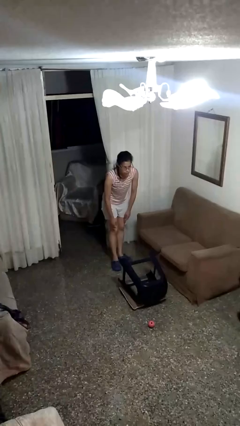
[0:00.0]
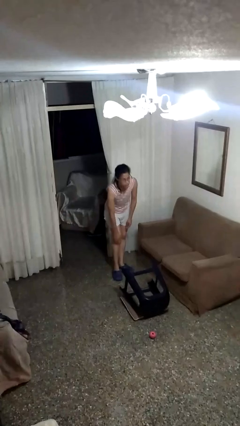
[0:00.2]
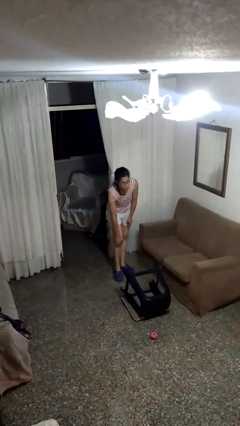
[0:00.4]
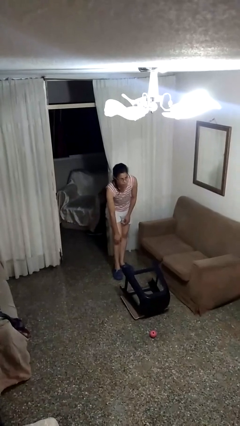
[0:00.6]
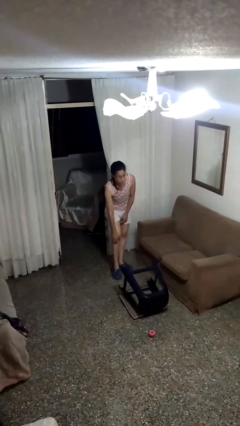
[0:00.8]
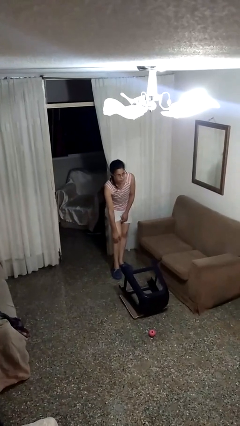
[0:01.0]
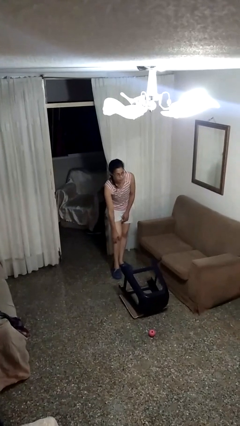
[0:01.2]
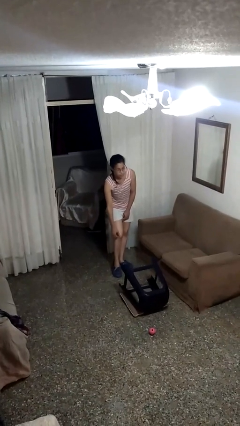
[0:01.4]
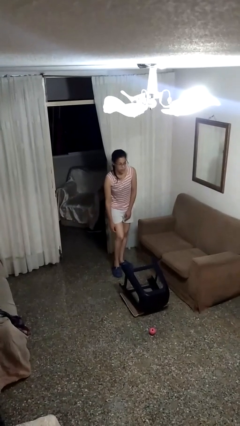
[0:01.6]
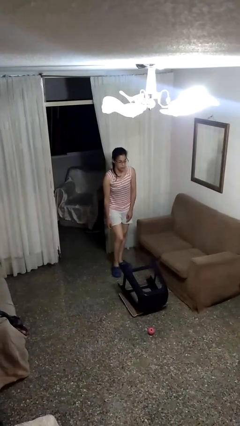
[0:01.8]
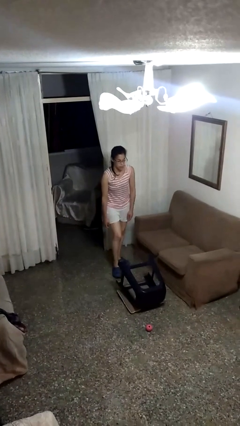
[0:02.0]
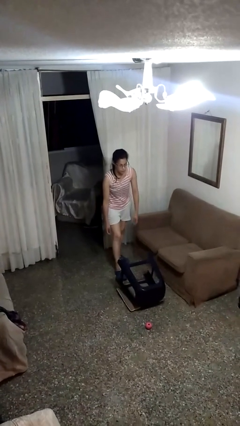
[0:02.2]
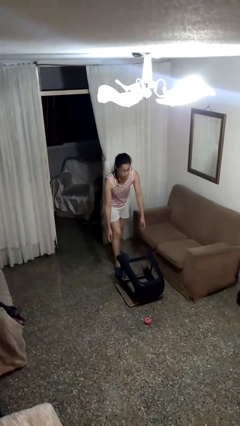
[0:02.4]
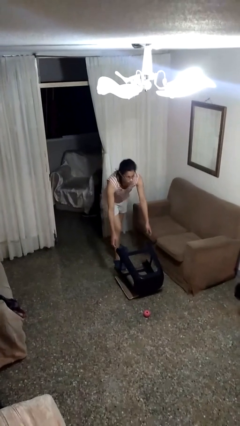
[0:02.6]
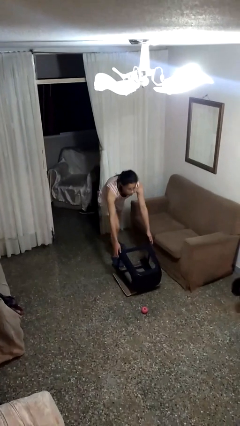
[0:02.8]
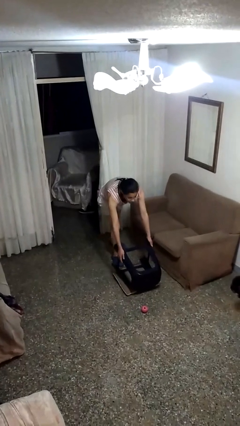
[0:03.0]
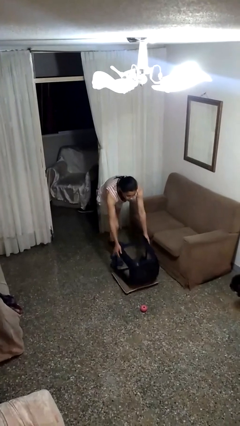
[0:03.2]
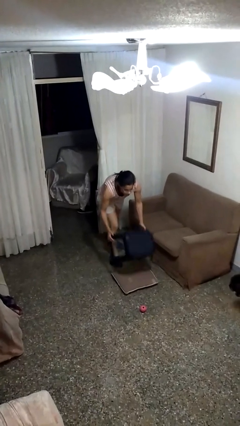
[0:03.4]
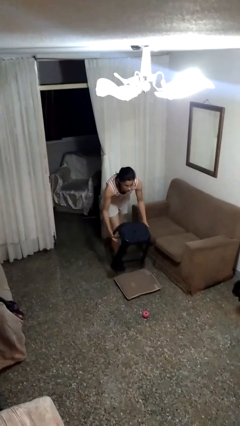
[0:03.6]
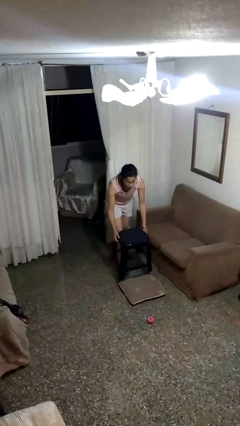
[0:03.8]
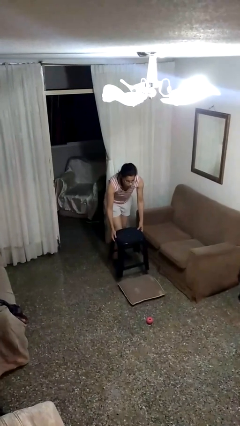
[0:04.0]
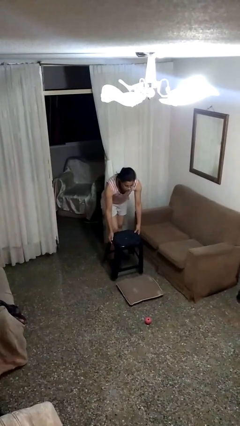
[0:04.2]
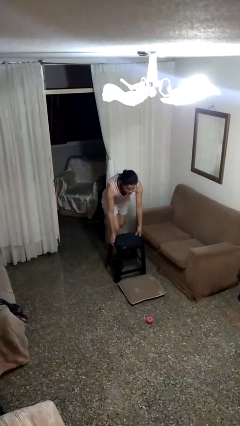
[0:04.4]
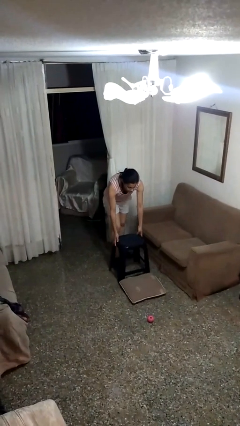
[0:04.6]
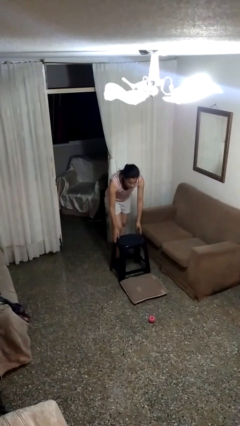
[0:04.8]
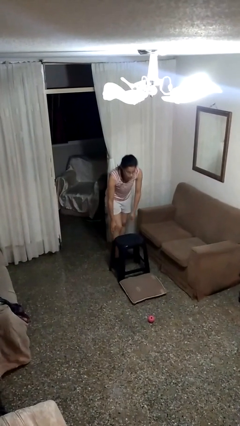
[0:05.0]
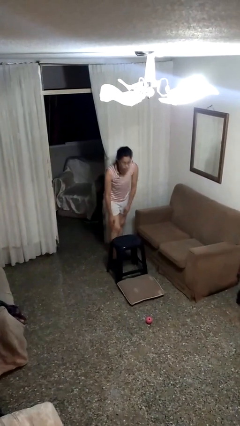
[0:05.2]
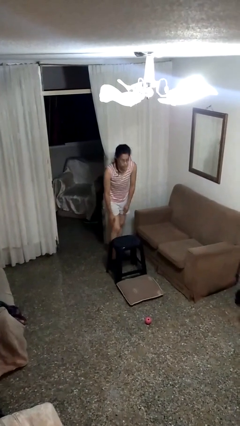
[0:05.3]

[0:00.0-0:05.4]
person sets upright furniture

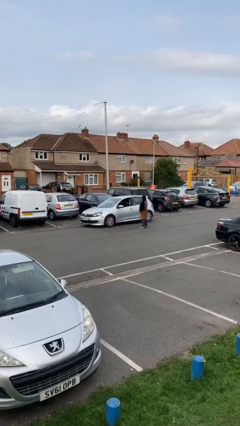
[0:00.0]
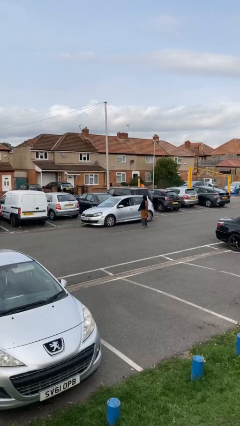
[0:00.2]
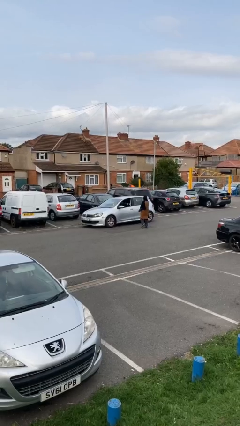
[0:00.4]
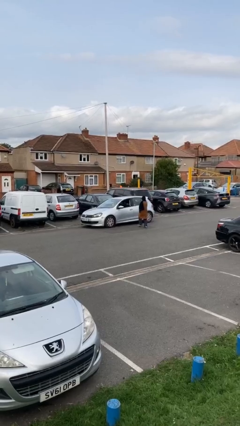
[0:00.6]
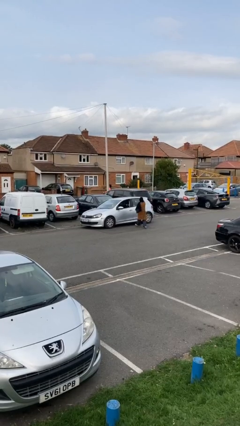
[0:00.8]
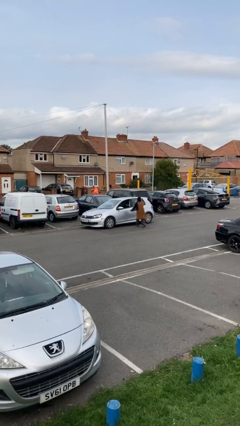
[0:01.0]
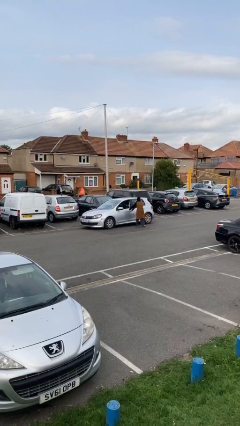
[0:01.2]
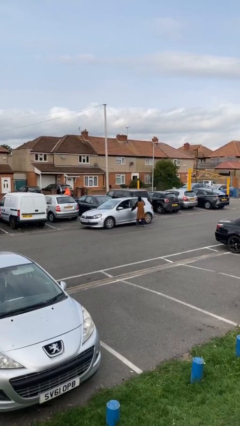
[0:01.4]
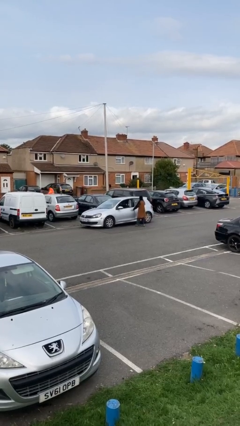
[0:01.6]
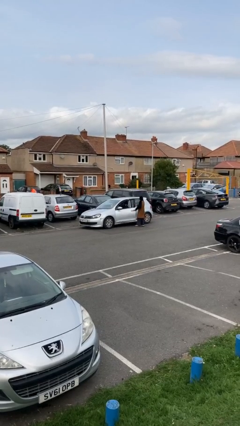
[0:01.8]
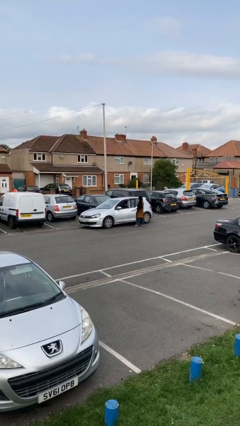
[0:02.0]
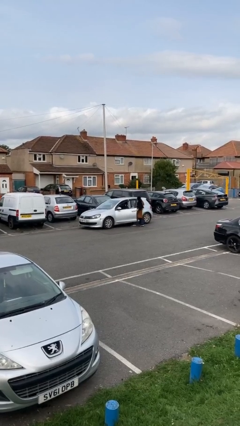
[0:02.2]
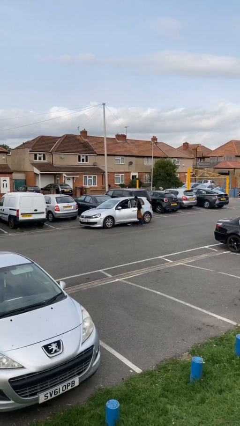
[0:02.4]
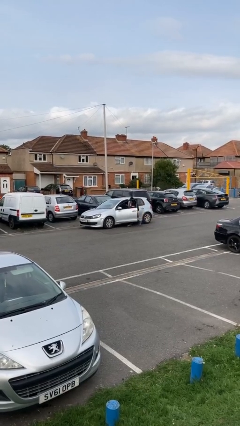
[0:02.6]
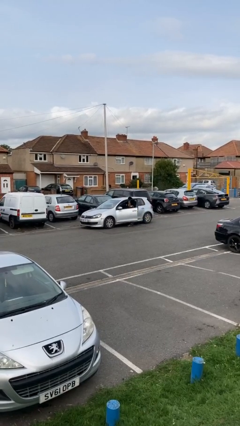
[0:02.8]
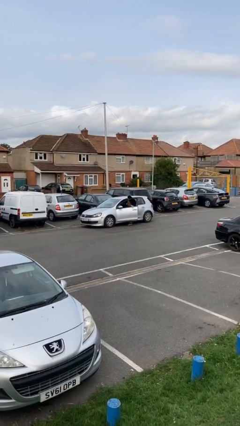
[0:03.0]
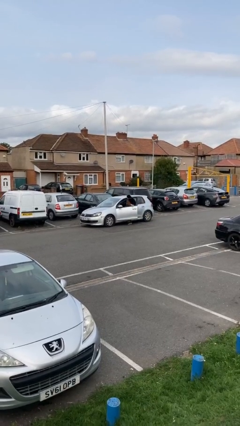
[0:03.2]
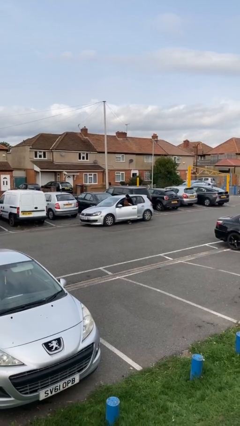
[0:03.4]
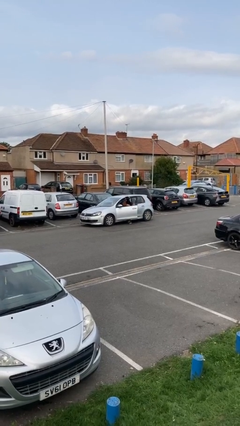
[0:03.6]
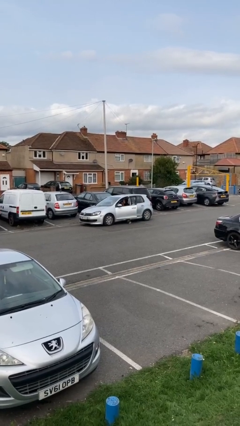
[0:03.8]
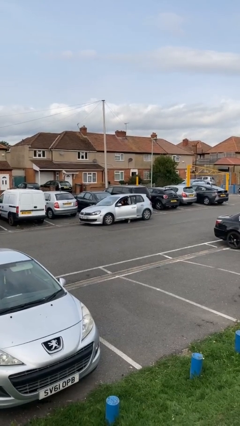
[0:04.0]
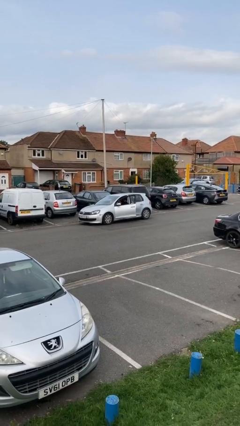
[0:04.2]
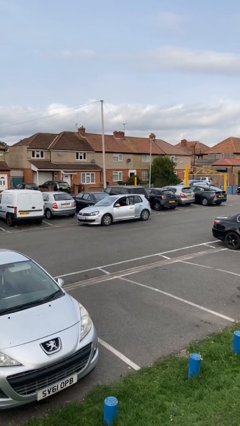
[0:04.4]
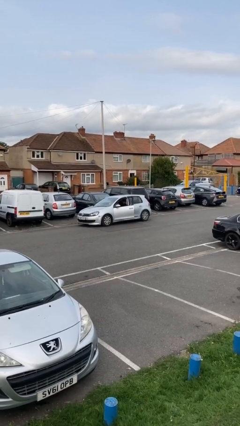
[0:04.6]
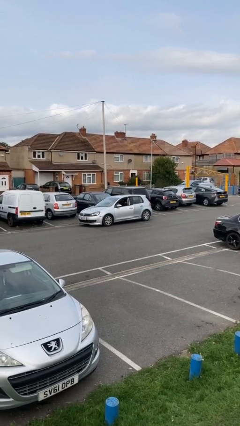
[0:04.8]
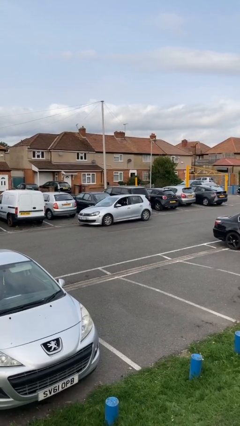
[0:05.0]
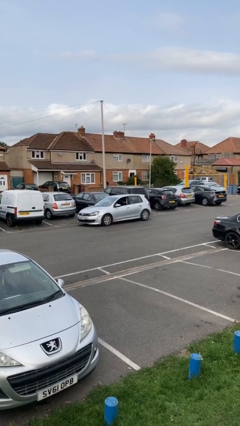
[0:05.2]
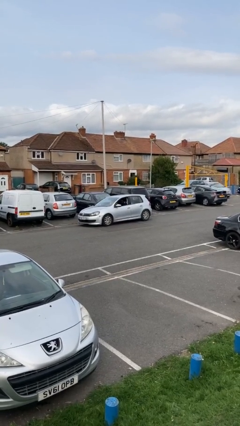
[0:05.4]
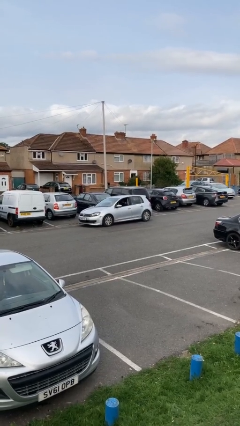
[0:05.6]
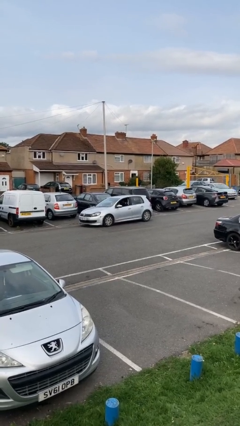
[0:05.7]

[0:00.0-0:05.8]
car picks up person

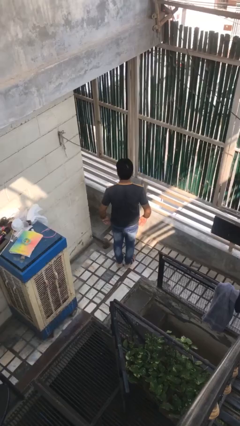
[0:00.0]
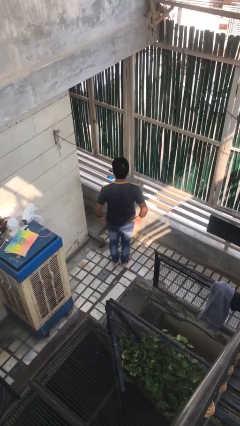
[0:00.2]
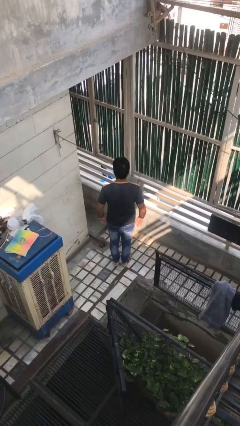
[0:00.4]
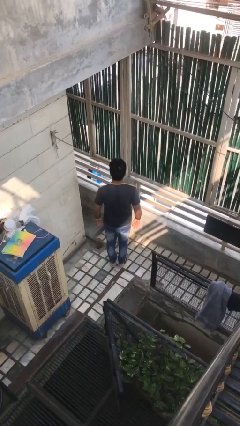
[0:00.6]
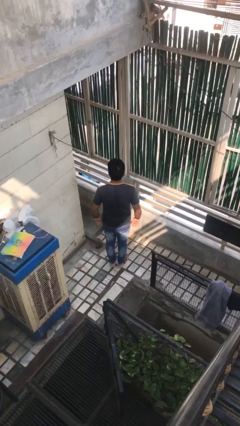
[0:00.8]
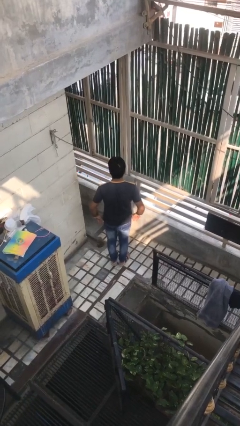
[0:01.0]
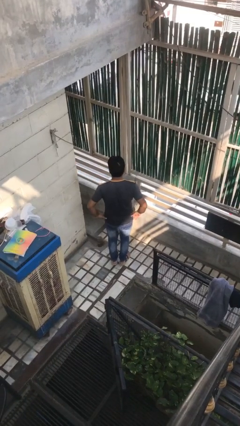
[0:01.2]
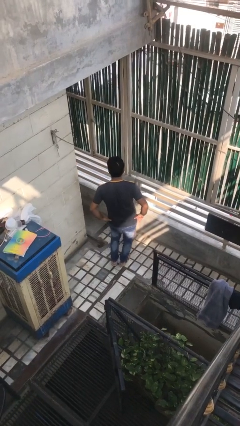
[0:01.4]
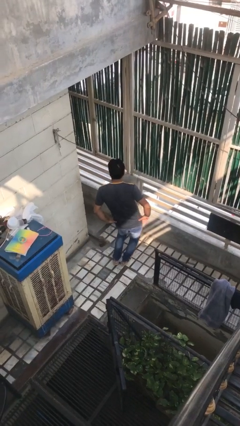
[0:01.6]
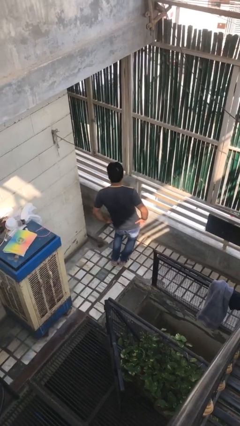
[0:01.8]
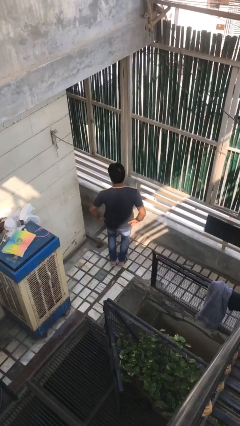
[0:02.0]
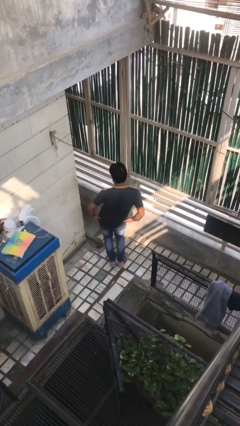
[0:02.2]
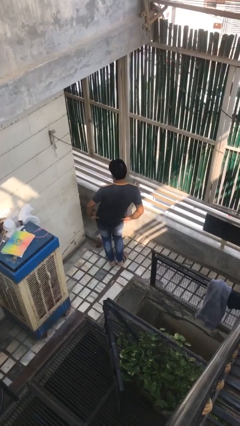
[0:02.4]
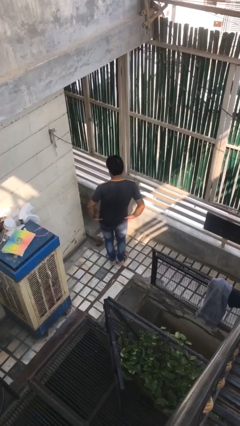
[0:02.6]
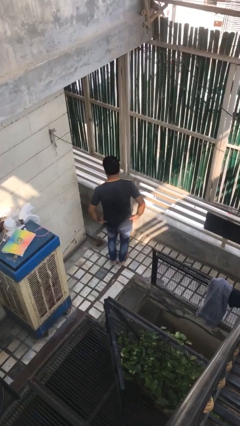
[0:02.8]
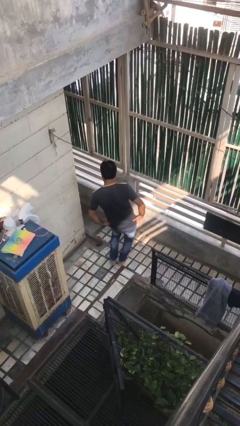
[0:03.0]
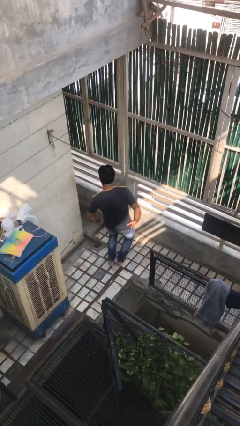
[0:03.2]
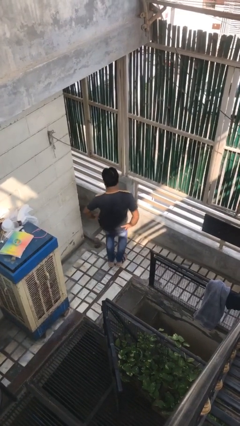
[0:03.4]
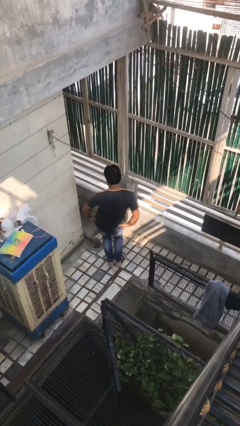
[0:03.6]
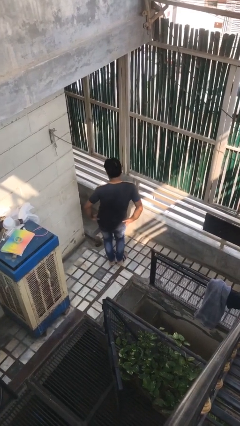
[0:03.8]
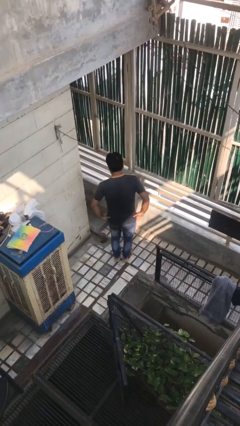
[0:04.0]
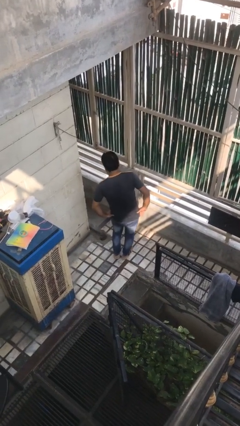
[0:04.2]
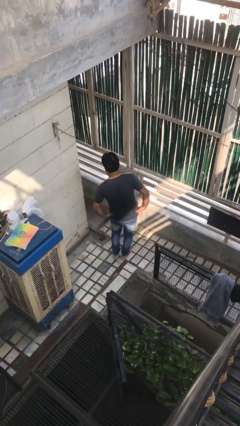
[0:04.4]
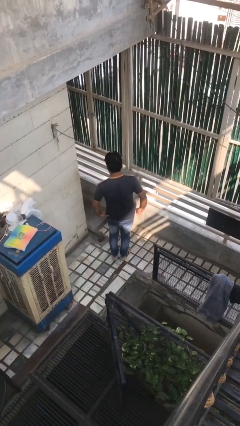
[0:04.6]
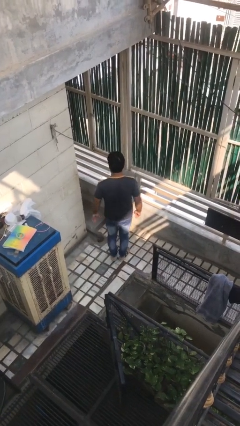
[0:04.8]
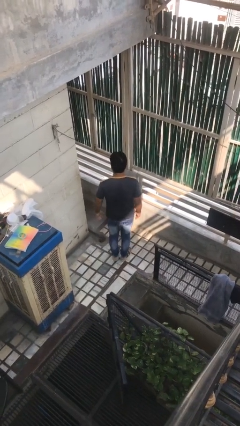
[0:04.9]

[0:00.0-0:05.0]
person wiggles hips

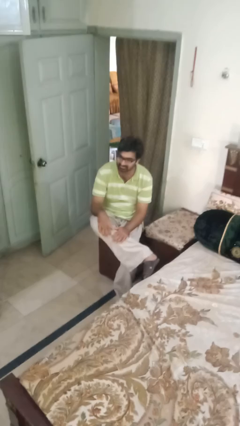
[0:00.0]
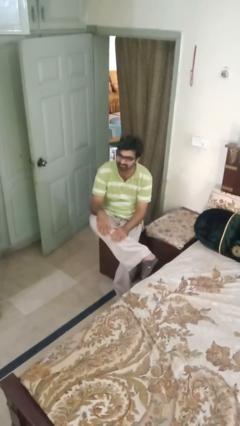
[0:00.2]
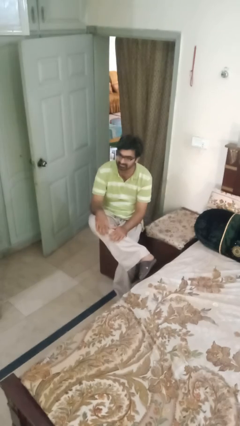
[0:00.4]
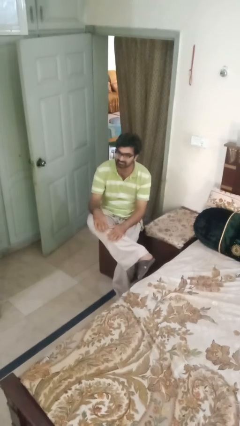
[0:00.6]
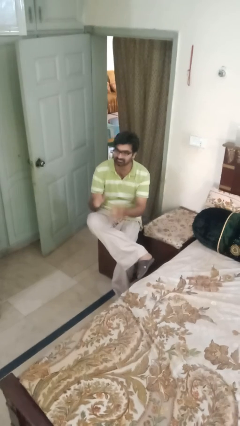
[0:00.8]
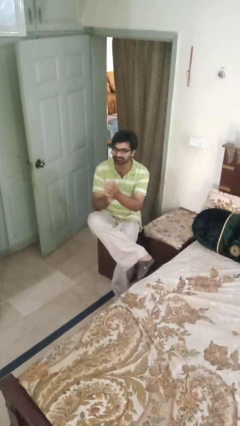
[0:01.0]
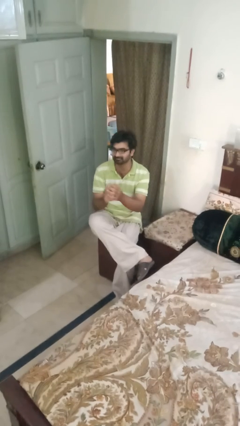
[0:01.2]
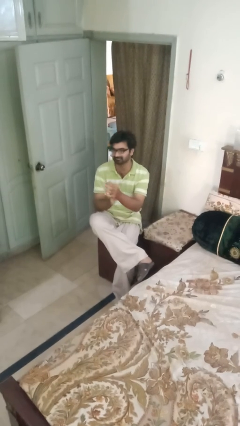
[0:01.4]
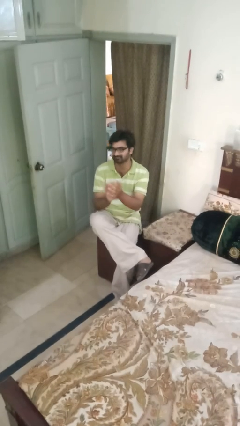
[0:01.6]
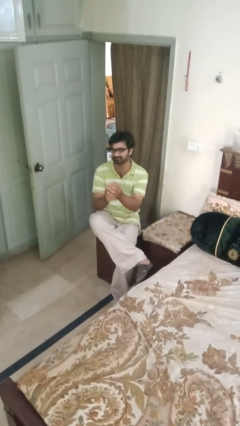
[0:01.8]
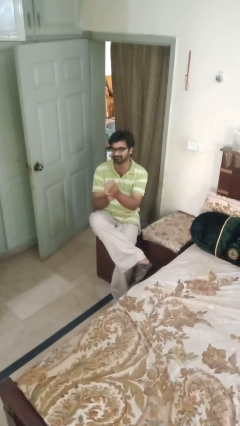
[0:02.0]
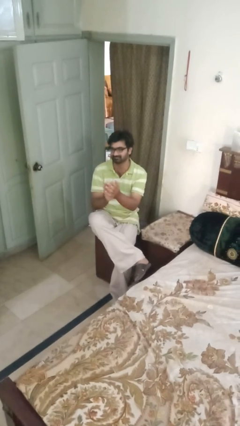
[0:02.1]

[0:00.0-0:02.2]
person claps hands
